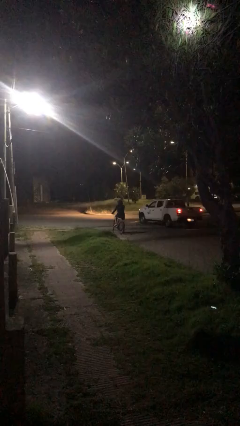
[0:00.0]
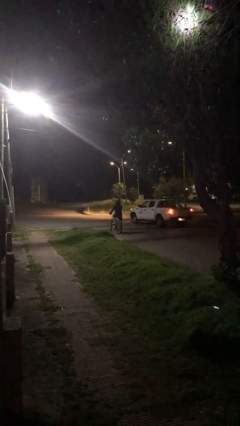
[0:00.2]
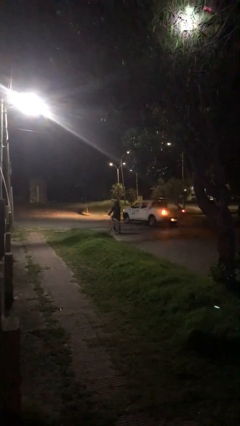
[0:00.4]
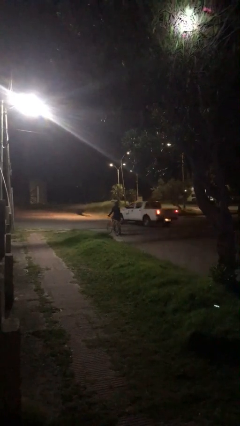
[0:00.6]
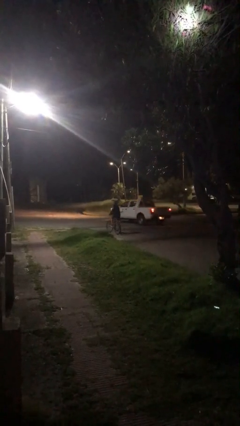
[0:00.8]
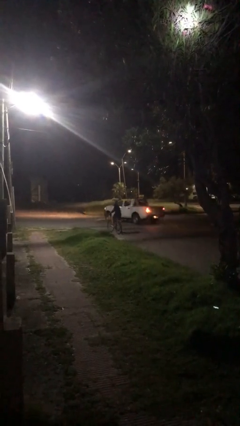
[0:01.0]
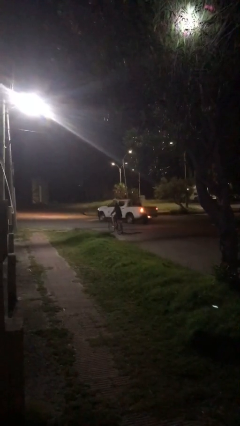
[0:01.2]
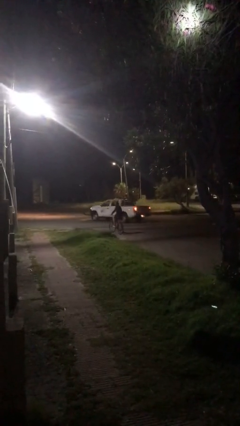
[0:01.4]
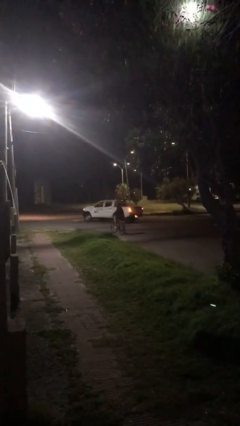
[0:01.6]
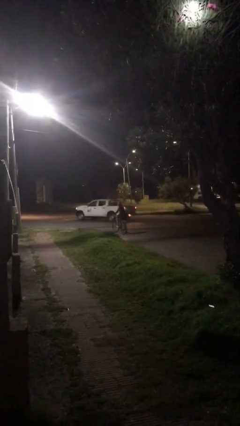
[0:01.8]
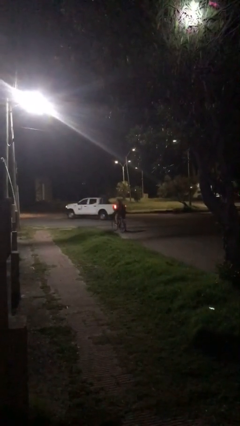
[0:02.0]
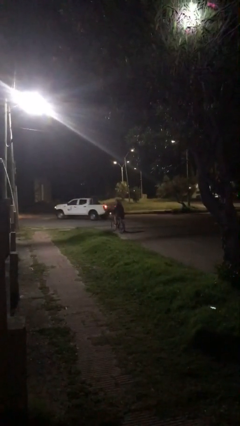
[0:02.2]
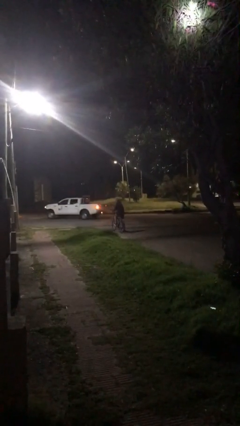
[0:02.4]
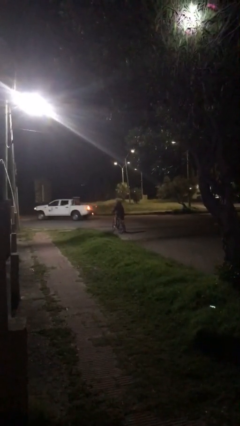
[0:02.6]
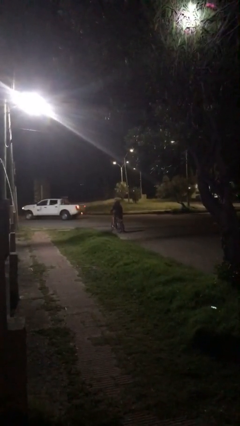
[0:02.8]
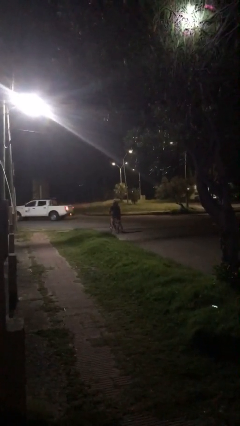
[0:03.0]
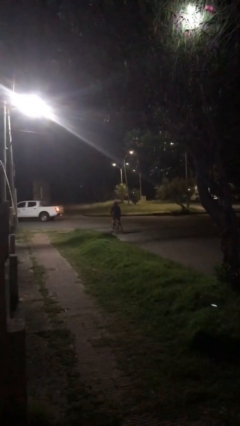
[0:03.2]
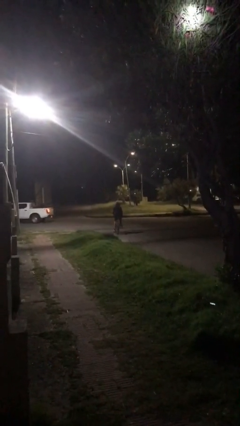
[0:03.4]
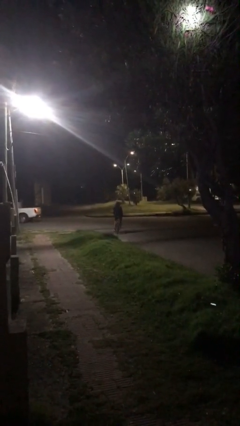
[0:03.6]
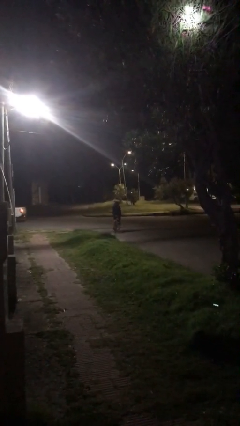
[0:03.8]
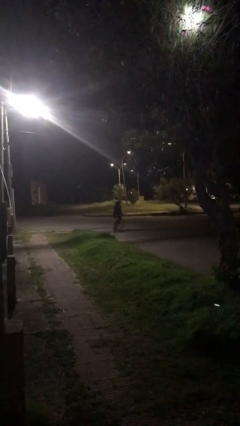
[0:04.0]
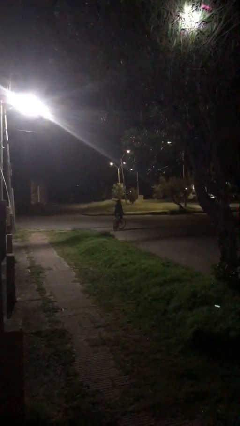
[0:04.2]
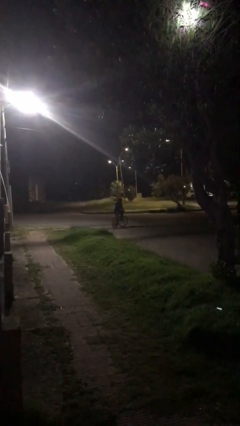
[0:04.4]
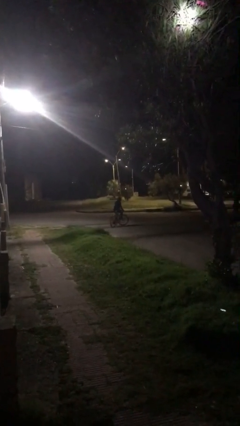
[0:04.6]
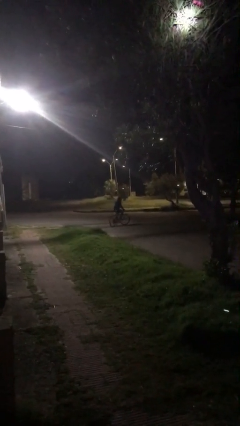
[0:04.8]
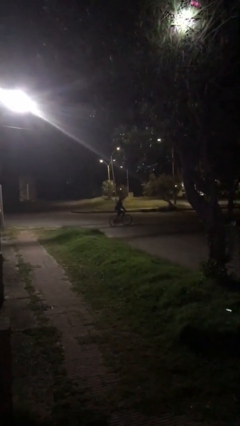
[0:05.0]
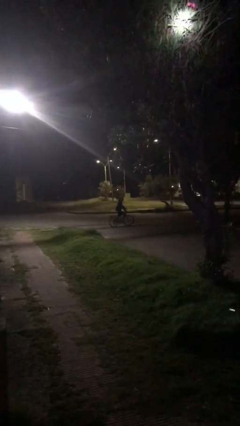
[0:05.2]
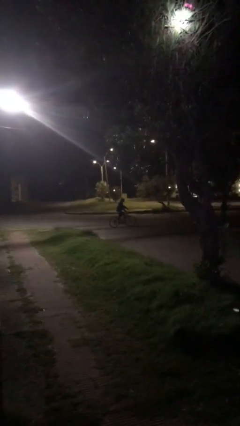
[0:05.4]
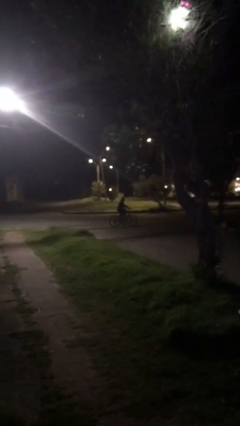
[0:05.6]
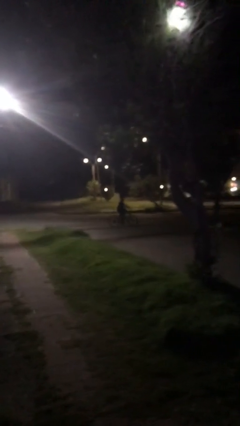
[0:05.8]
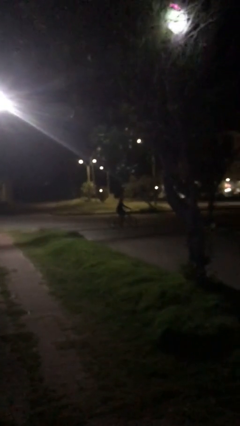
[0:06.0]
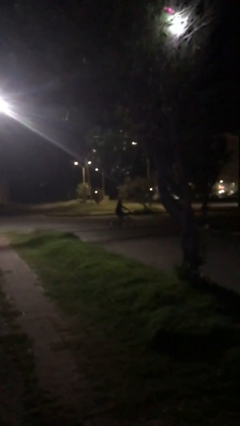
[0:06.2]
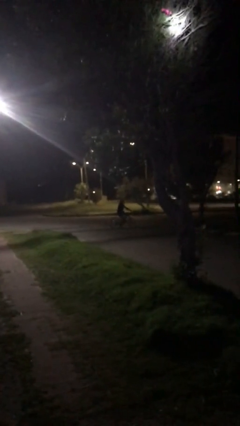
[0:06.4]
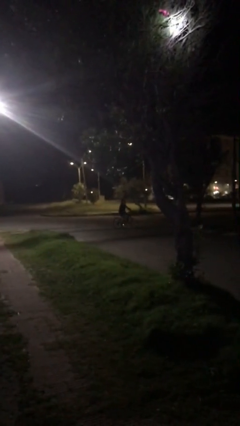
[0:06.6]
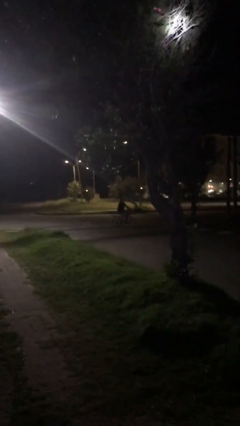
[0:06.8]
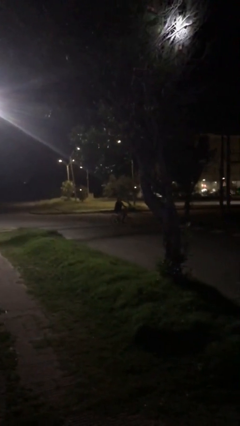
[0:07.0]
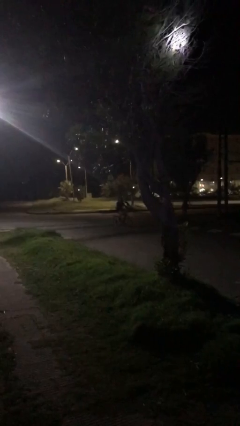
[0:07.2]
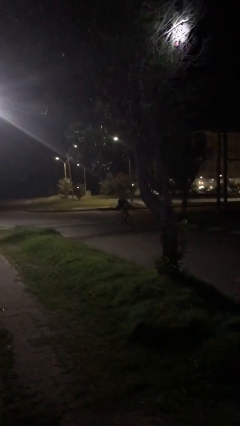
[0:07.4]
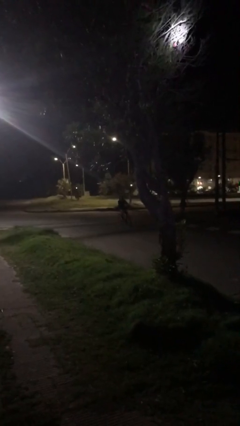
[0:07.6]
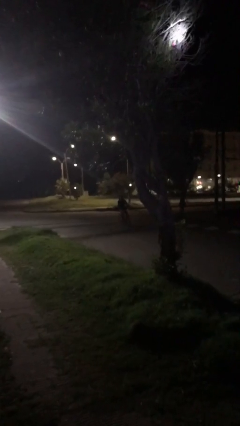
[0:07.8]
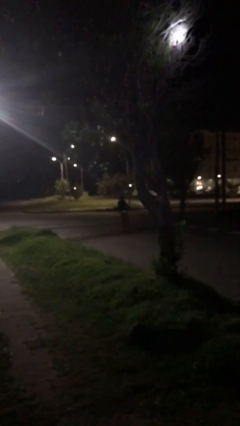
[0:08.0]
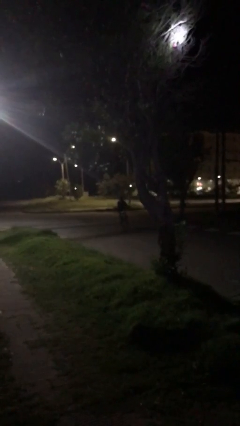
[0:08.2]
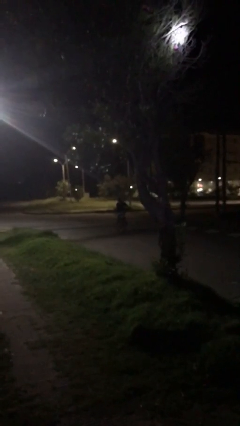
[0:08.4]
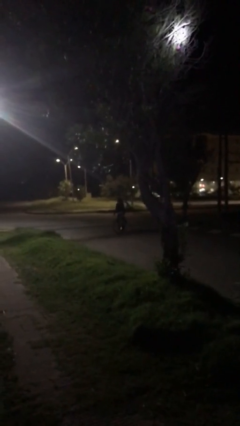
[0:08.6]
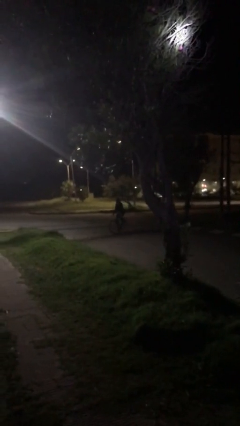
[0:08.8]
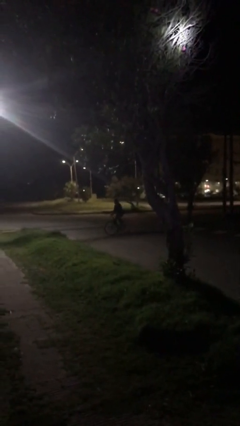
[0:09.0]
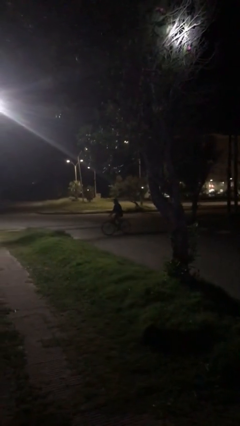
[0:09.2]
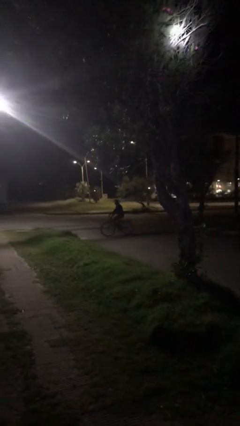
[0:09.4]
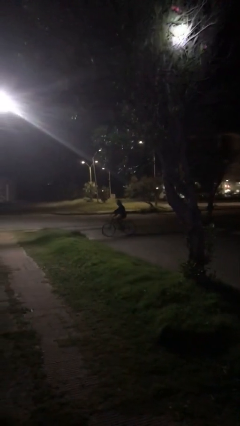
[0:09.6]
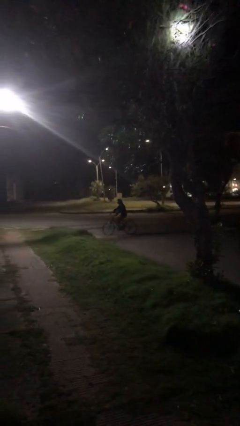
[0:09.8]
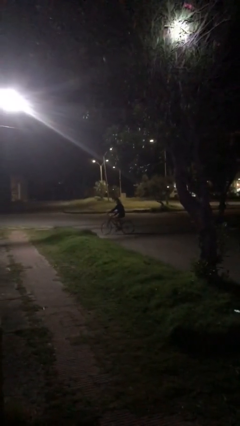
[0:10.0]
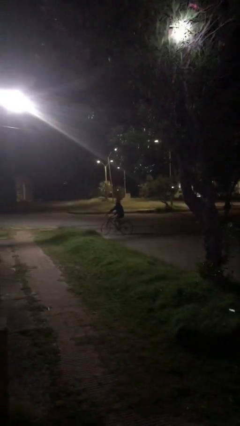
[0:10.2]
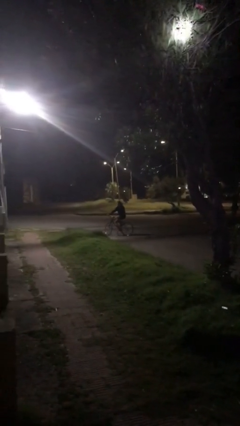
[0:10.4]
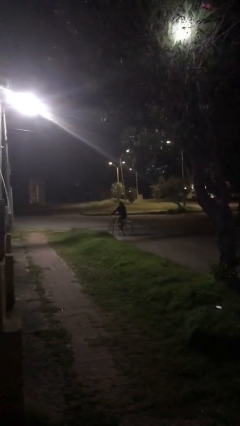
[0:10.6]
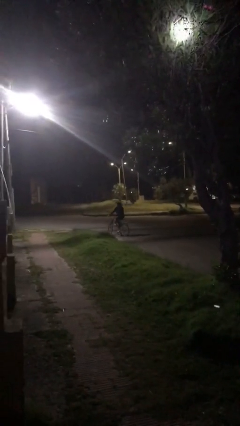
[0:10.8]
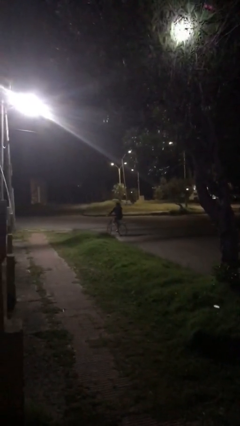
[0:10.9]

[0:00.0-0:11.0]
person rides bicycle

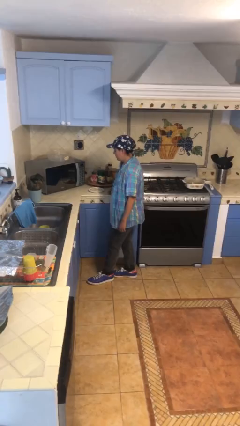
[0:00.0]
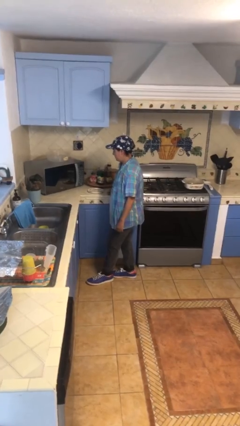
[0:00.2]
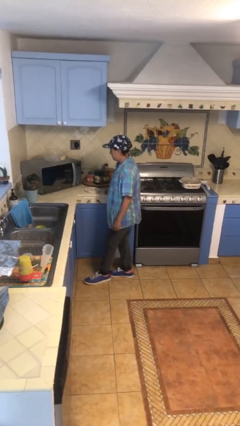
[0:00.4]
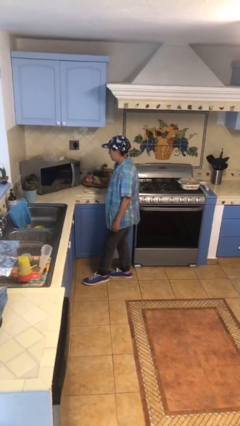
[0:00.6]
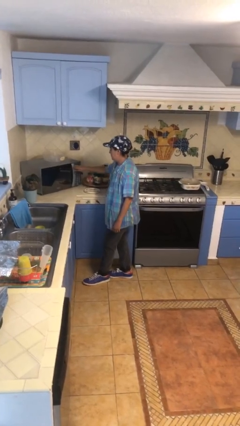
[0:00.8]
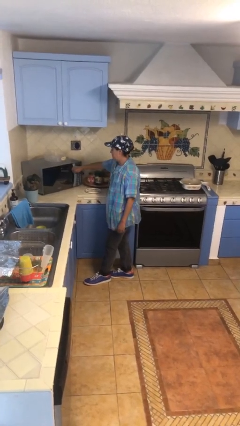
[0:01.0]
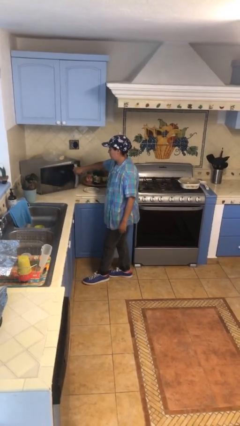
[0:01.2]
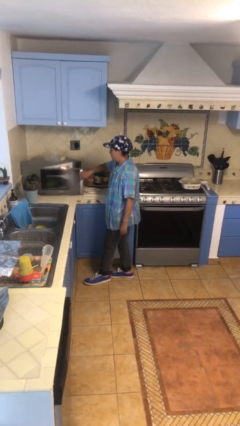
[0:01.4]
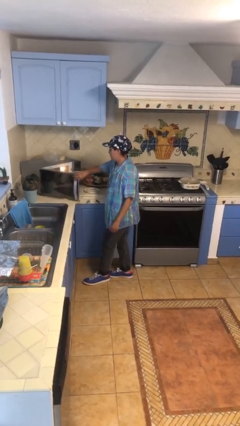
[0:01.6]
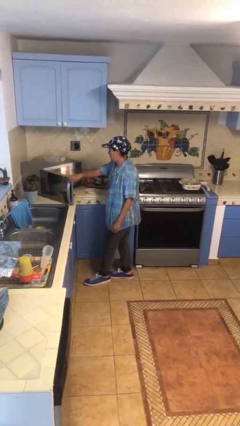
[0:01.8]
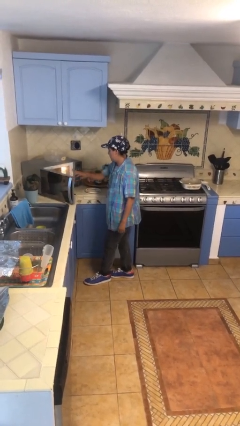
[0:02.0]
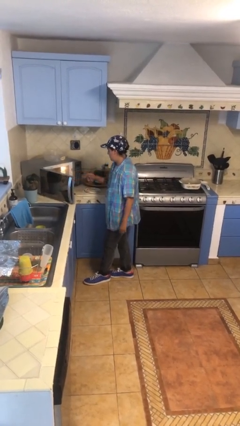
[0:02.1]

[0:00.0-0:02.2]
person opens microwave

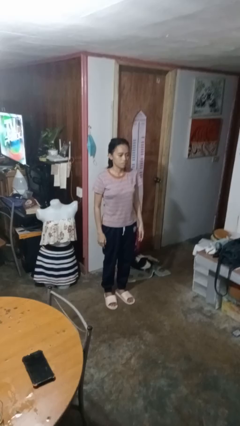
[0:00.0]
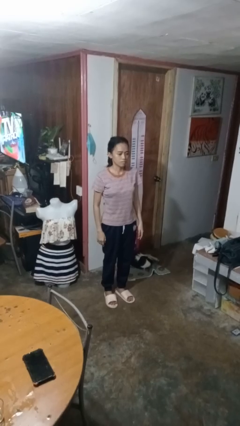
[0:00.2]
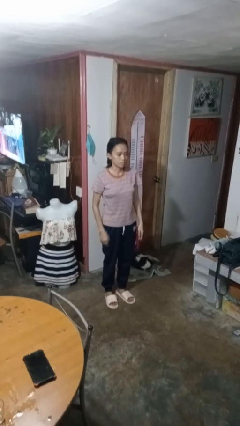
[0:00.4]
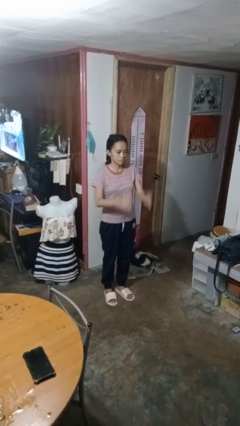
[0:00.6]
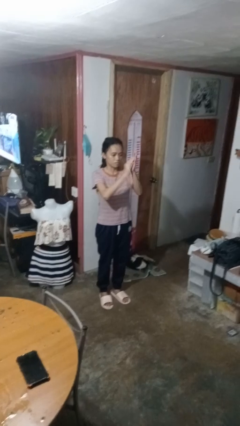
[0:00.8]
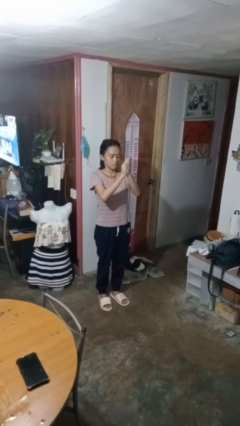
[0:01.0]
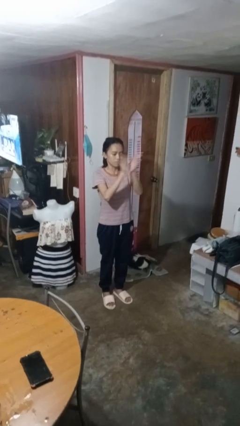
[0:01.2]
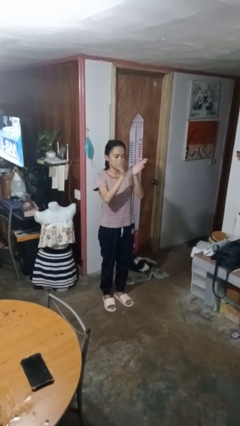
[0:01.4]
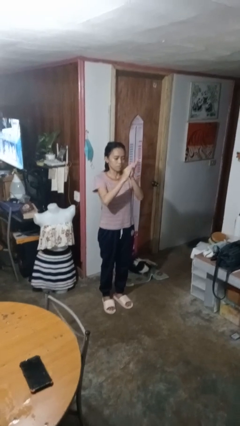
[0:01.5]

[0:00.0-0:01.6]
person claps hands

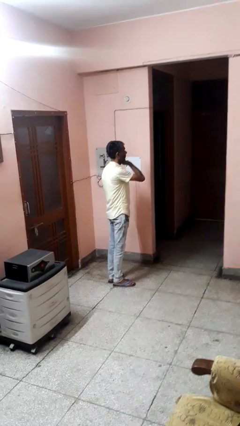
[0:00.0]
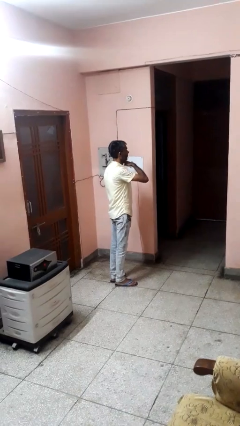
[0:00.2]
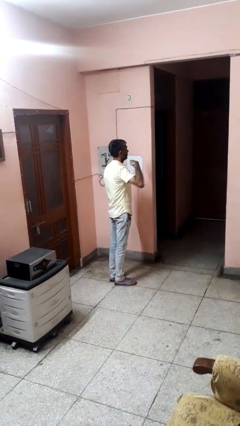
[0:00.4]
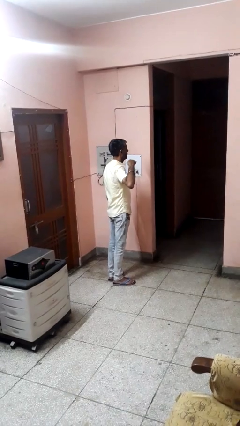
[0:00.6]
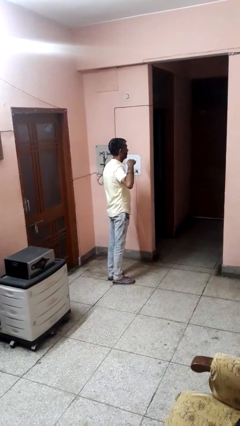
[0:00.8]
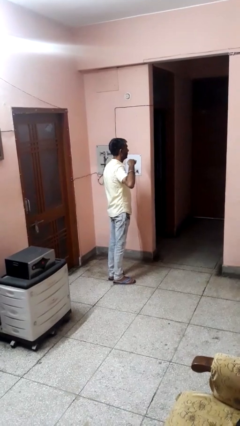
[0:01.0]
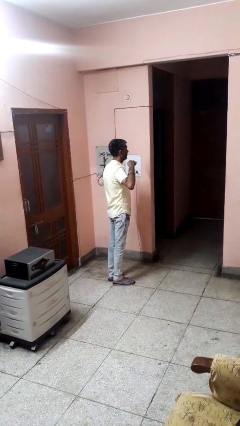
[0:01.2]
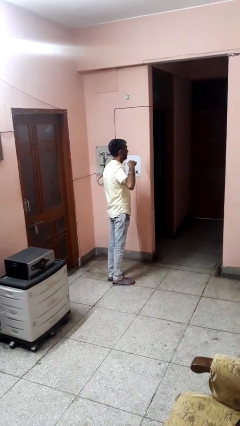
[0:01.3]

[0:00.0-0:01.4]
person gestures cut

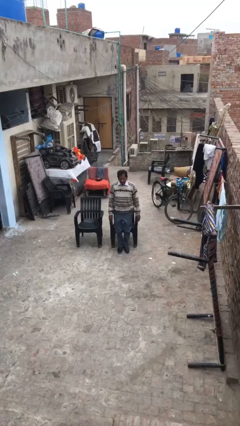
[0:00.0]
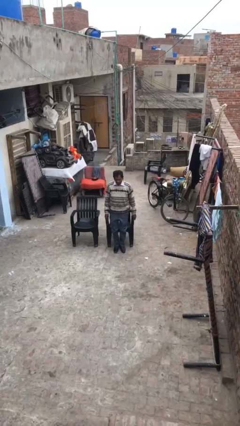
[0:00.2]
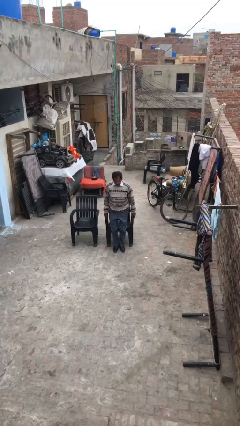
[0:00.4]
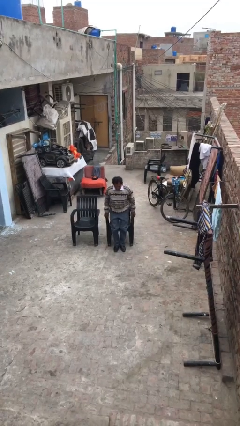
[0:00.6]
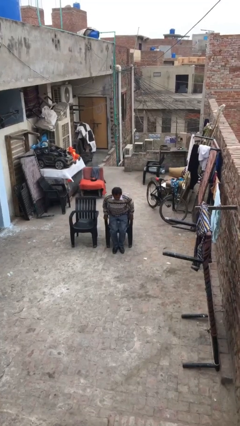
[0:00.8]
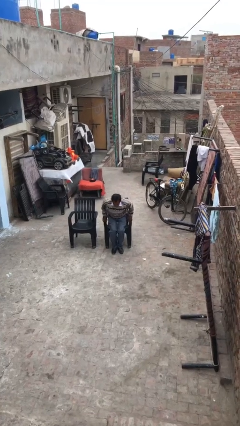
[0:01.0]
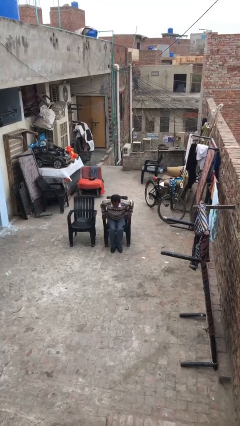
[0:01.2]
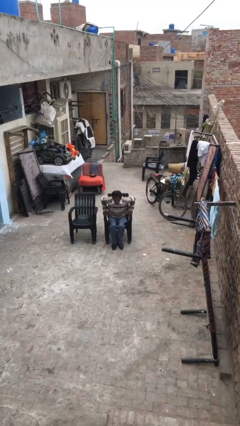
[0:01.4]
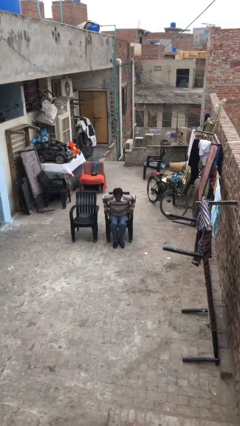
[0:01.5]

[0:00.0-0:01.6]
person sits down
